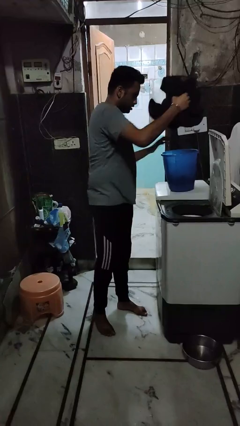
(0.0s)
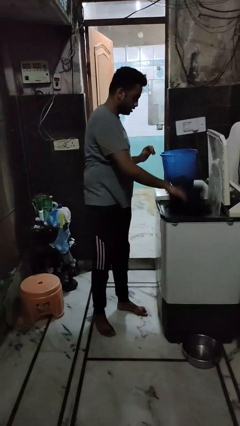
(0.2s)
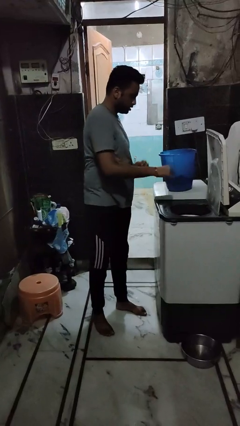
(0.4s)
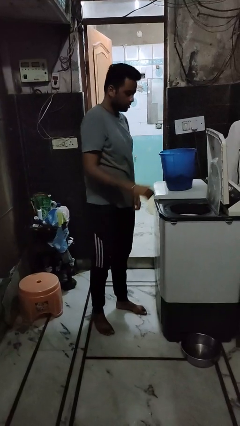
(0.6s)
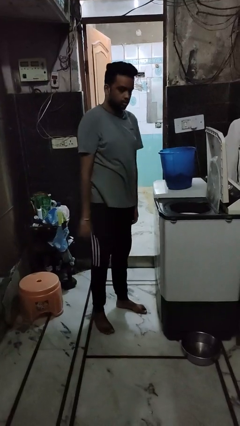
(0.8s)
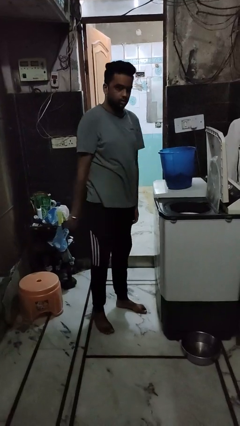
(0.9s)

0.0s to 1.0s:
person loads dryer

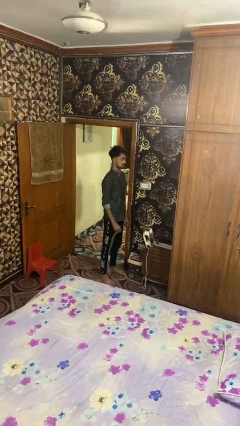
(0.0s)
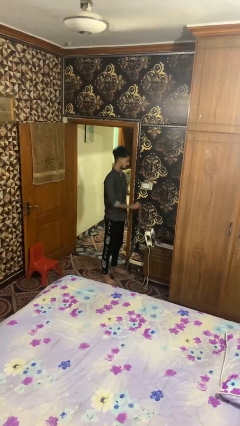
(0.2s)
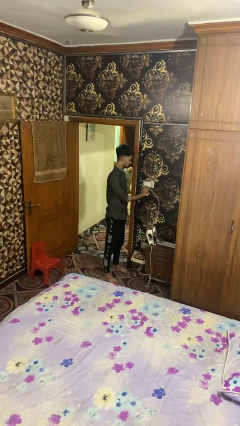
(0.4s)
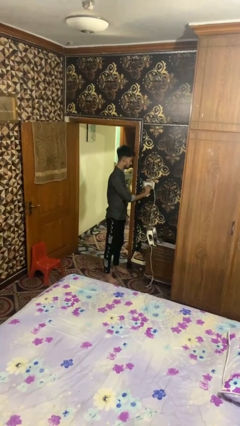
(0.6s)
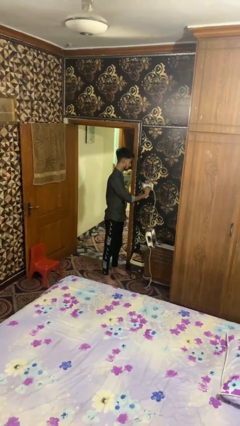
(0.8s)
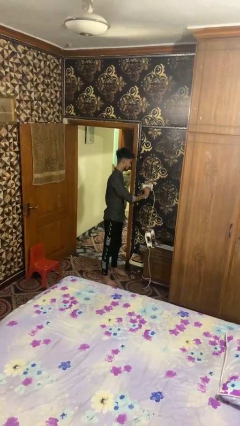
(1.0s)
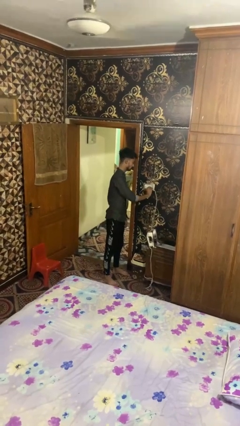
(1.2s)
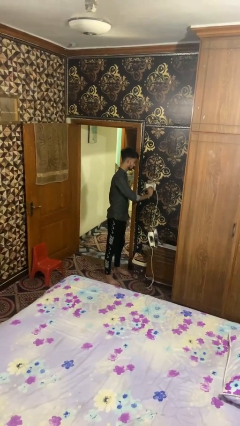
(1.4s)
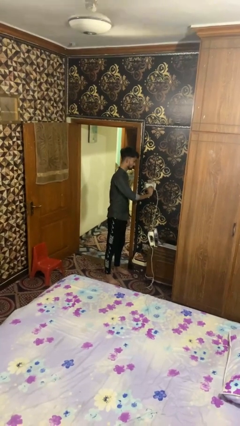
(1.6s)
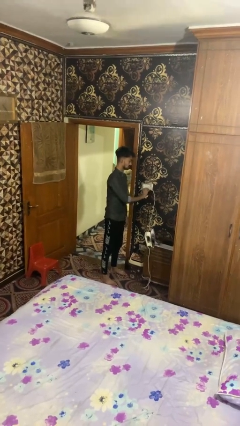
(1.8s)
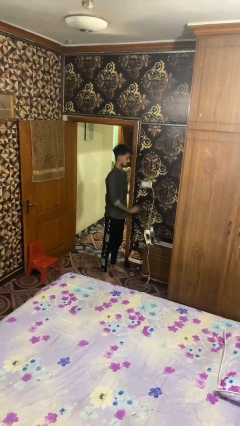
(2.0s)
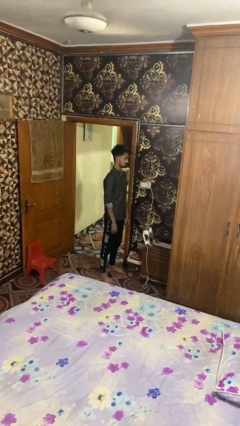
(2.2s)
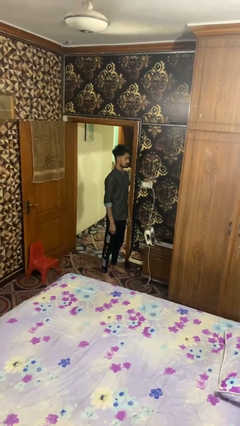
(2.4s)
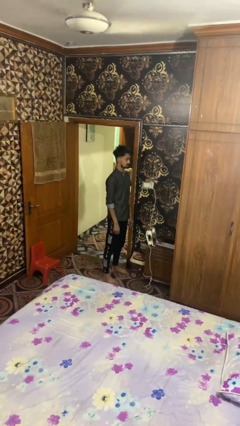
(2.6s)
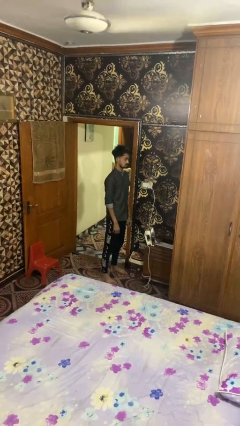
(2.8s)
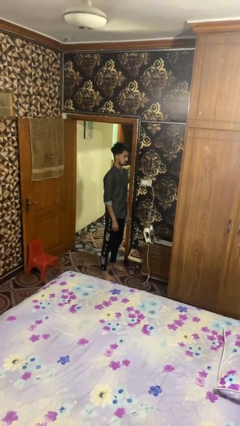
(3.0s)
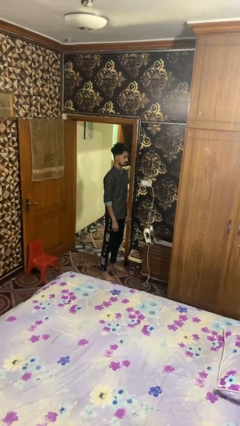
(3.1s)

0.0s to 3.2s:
person plugs into electrical socket

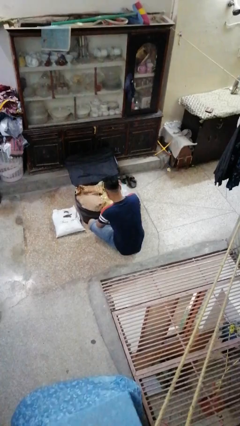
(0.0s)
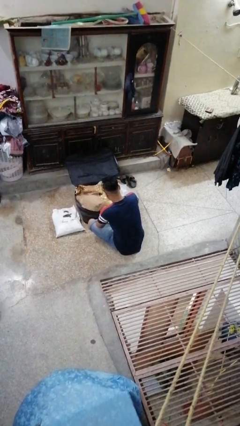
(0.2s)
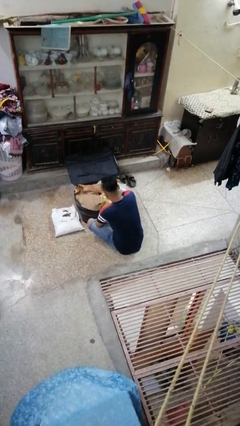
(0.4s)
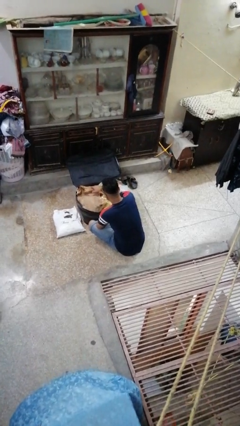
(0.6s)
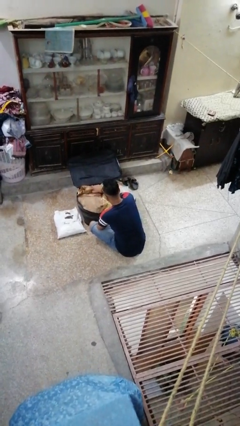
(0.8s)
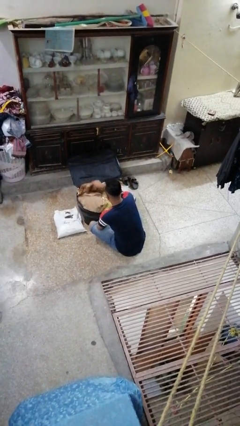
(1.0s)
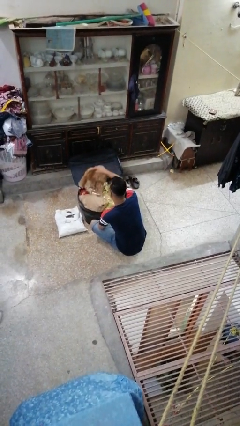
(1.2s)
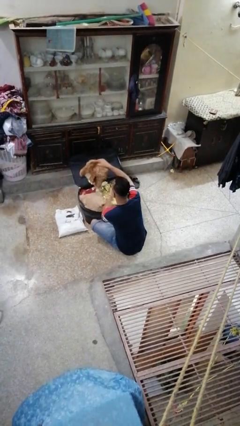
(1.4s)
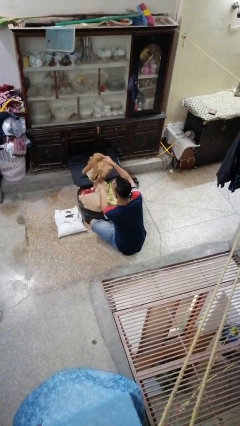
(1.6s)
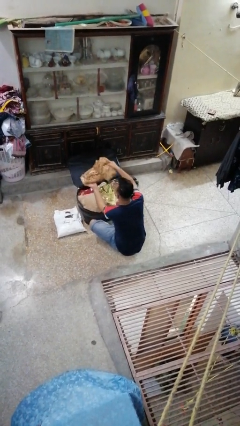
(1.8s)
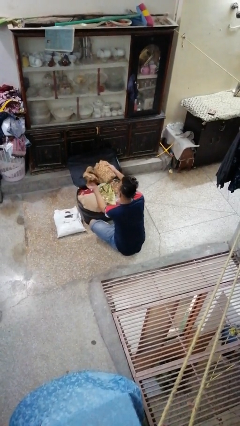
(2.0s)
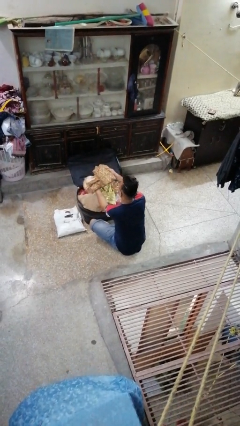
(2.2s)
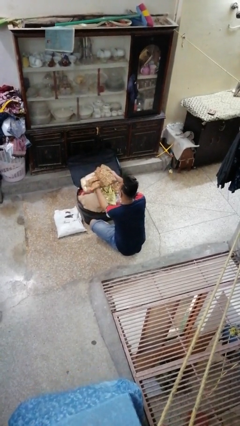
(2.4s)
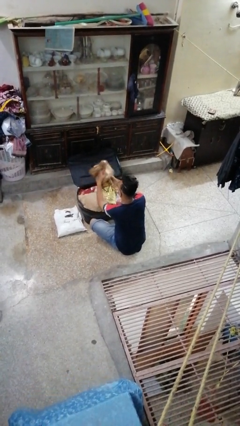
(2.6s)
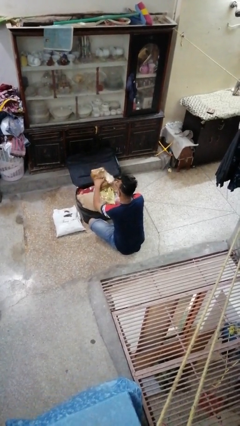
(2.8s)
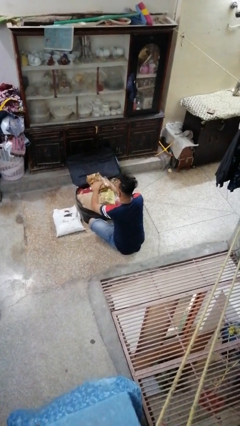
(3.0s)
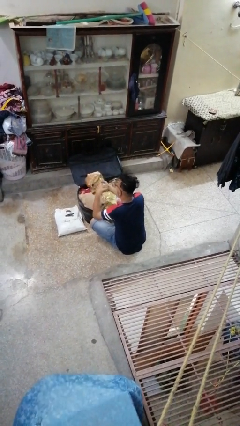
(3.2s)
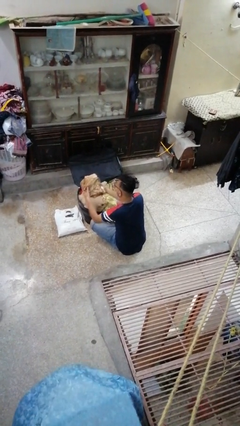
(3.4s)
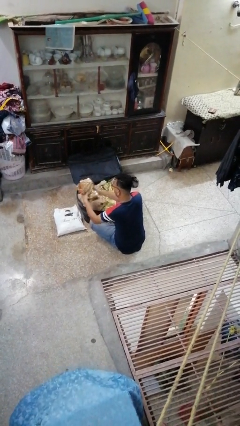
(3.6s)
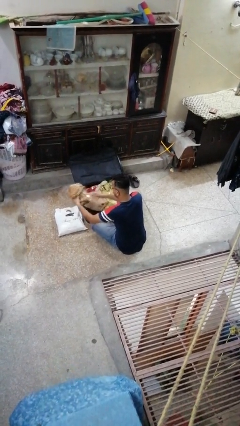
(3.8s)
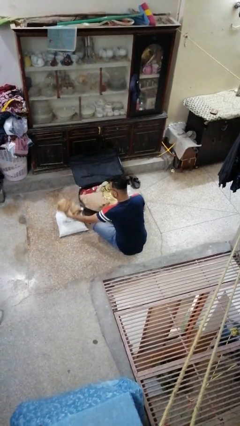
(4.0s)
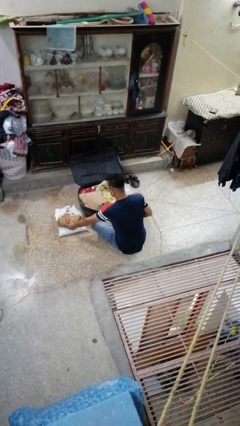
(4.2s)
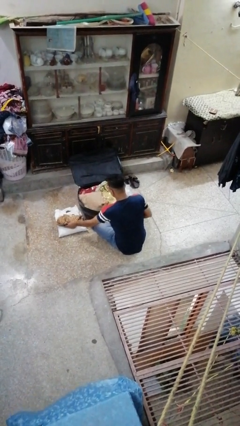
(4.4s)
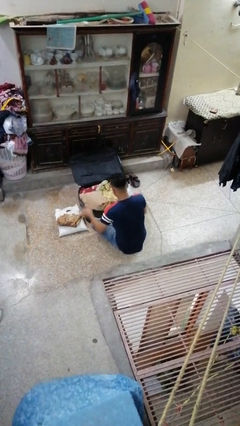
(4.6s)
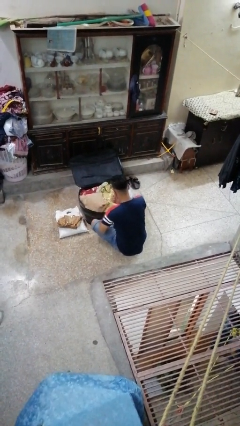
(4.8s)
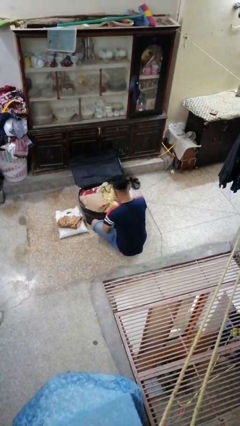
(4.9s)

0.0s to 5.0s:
person unloads clothes from suitcase

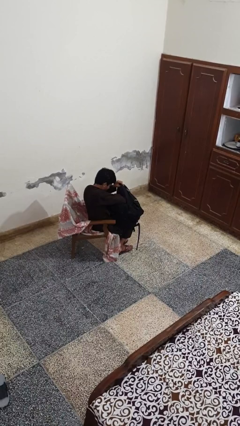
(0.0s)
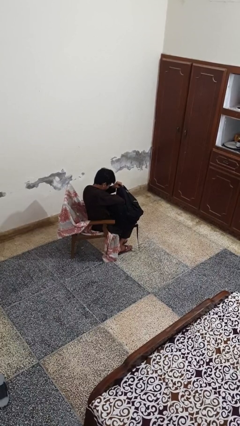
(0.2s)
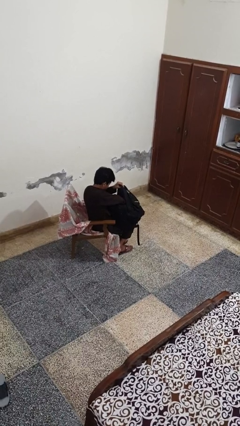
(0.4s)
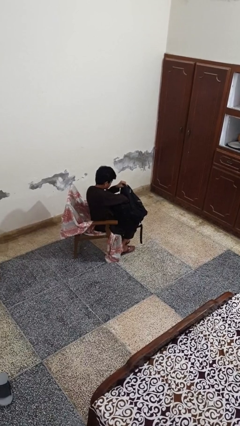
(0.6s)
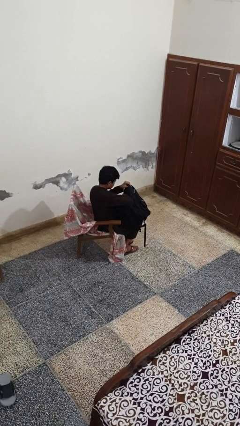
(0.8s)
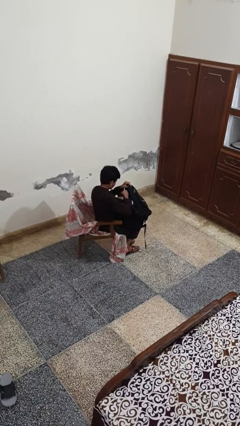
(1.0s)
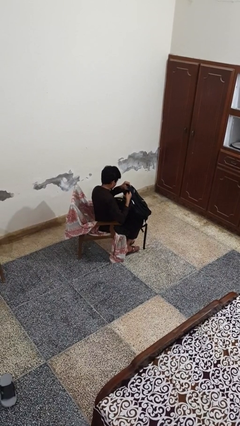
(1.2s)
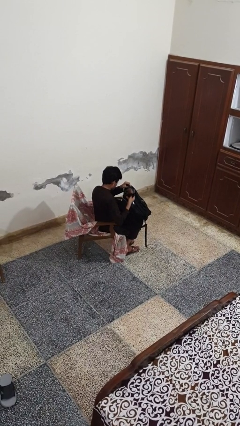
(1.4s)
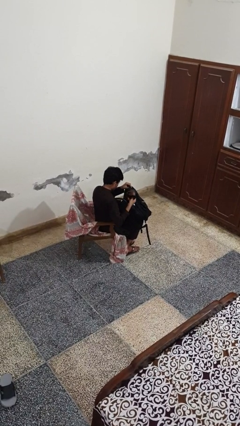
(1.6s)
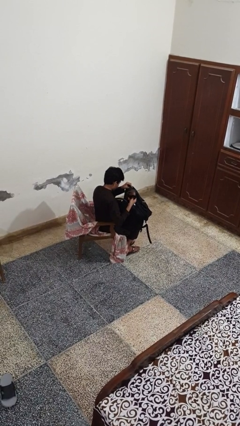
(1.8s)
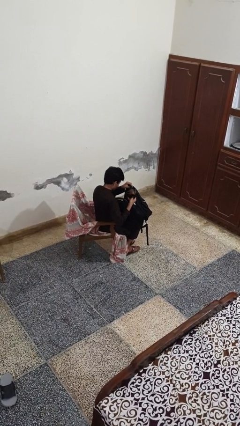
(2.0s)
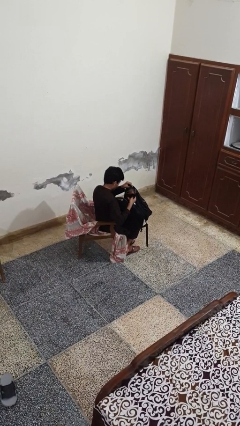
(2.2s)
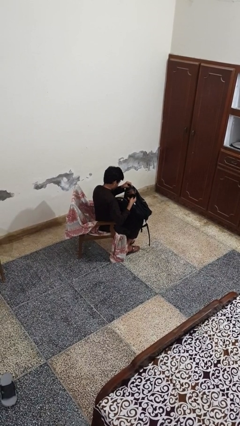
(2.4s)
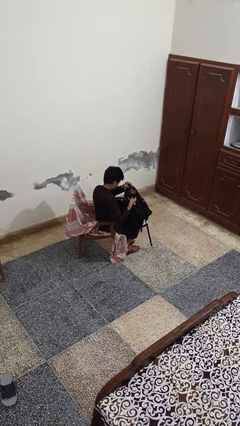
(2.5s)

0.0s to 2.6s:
person takes object from backpack

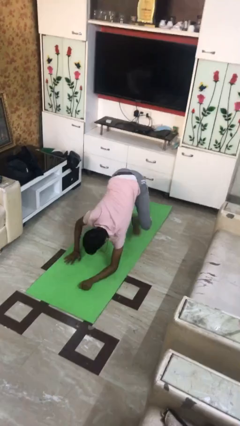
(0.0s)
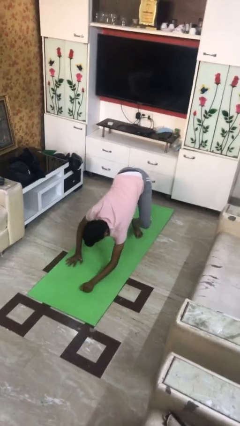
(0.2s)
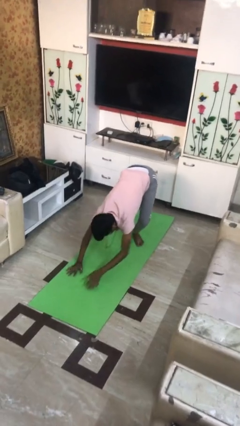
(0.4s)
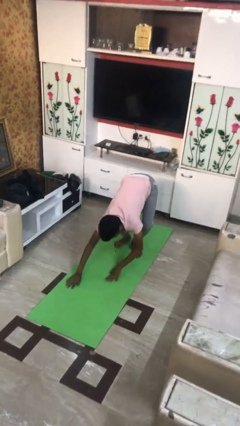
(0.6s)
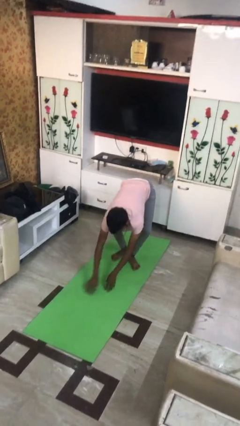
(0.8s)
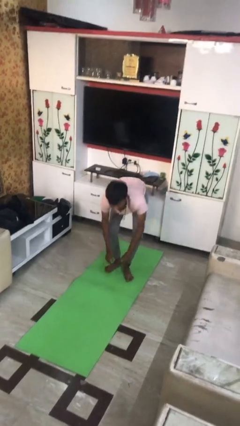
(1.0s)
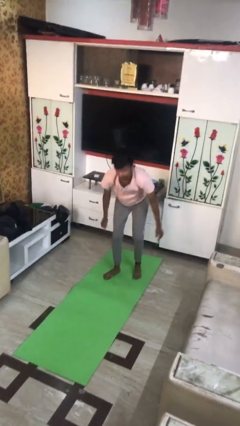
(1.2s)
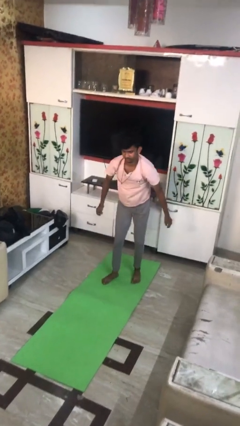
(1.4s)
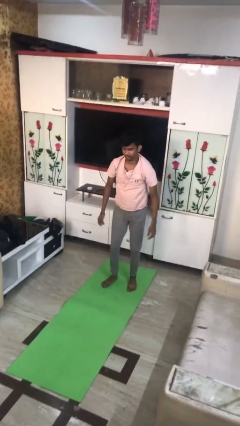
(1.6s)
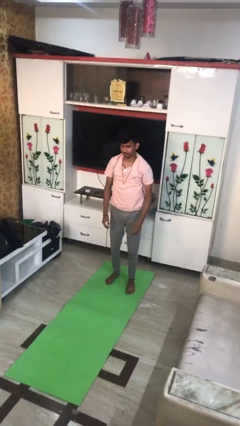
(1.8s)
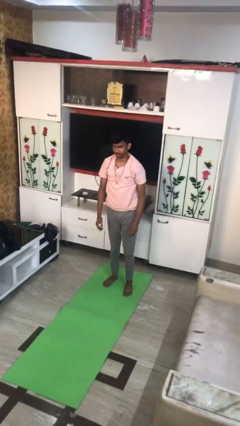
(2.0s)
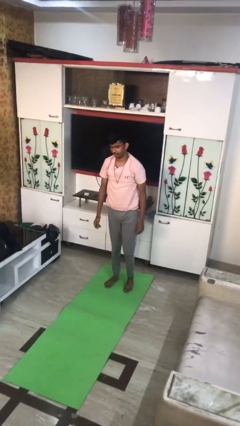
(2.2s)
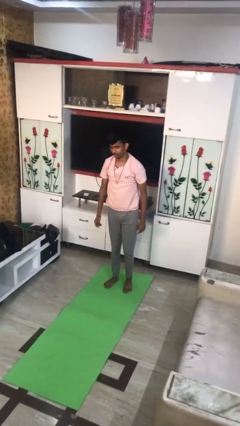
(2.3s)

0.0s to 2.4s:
person stands up from floor

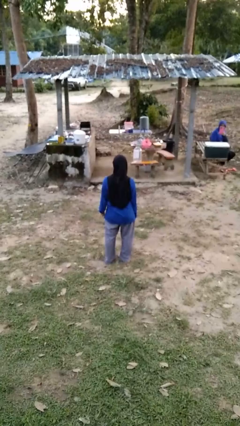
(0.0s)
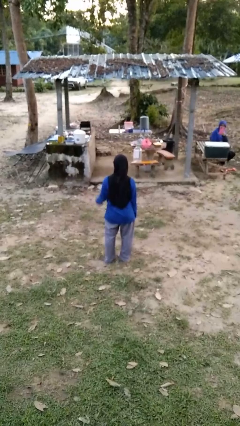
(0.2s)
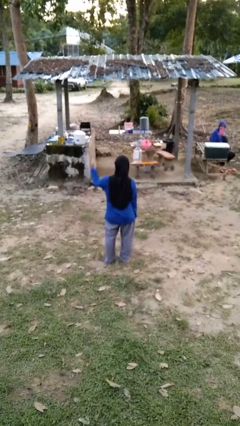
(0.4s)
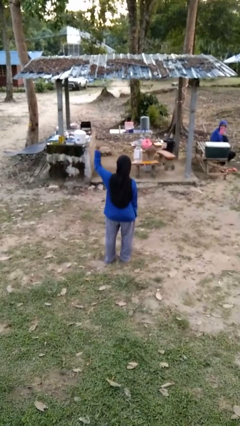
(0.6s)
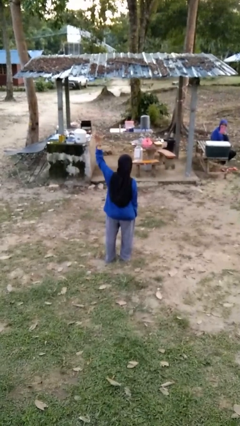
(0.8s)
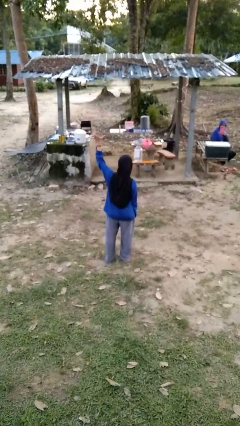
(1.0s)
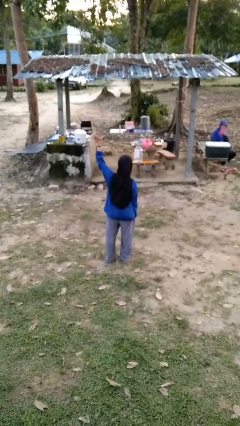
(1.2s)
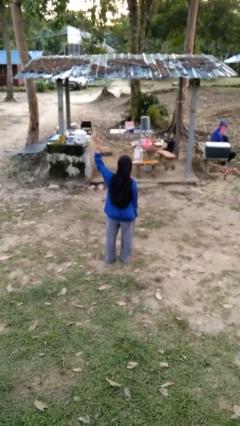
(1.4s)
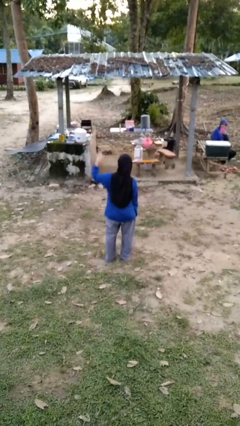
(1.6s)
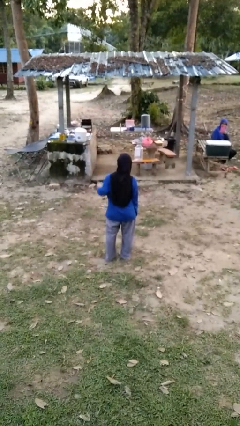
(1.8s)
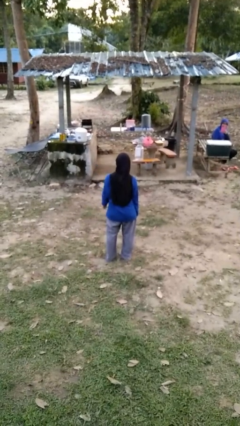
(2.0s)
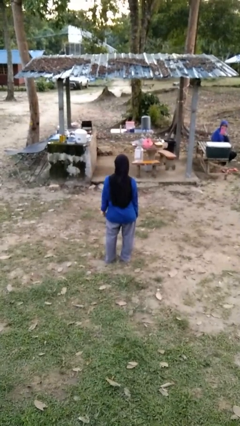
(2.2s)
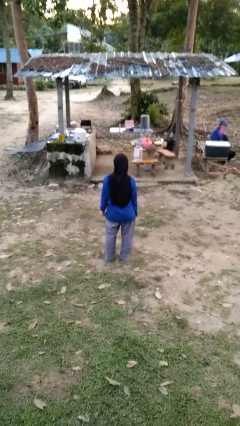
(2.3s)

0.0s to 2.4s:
person gestures number five

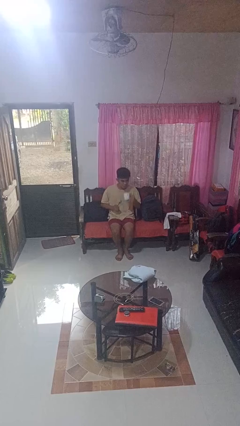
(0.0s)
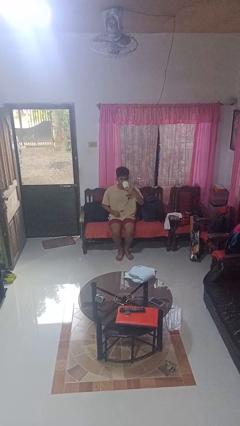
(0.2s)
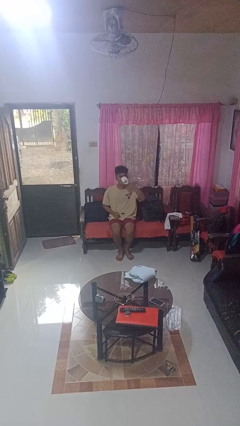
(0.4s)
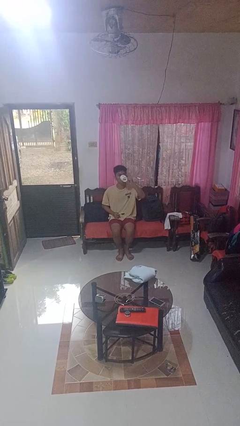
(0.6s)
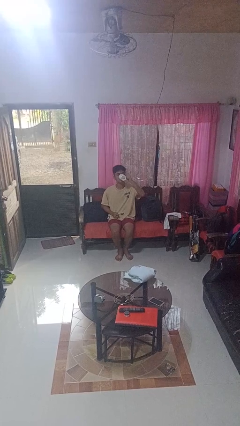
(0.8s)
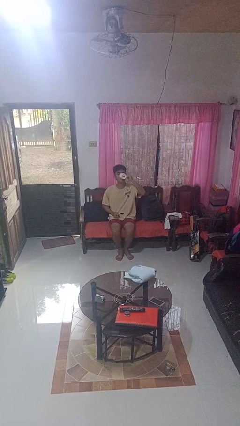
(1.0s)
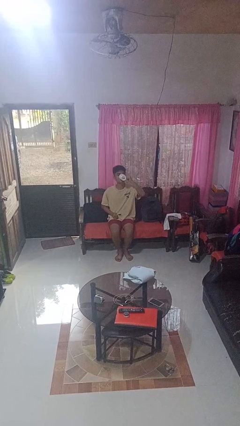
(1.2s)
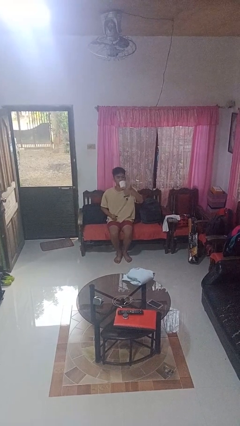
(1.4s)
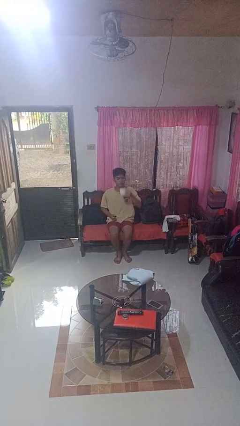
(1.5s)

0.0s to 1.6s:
person drinks from mug
